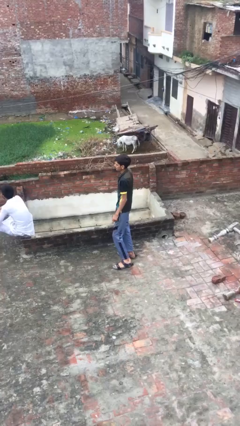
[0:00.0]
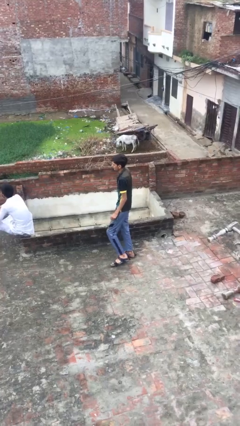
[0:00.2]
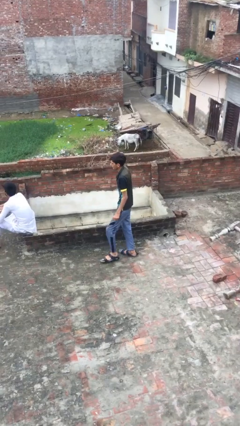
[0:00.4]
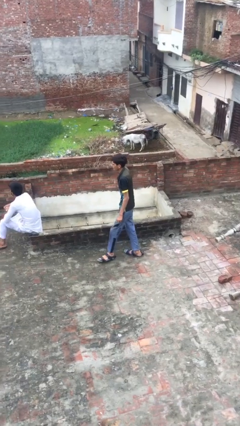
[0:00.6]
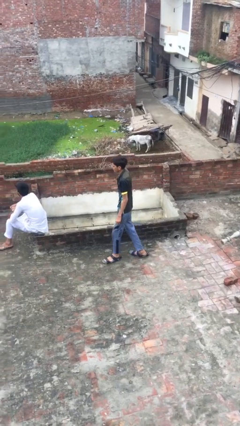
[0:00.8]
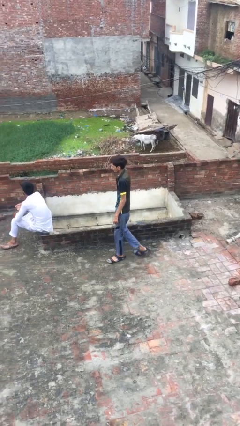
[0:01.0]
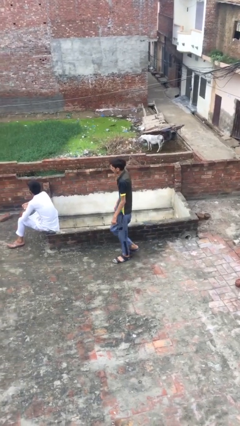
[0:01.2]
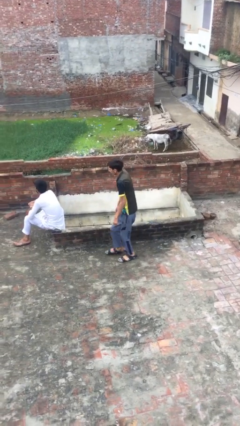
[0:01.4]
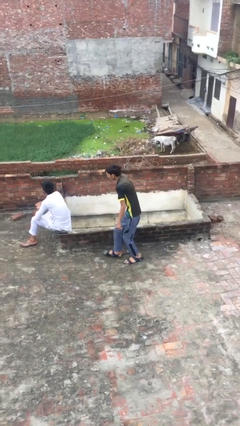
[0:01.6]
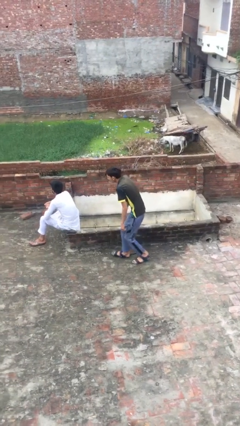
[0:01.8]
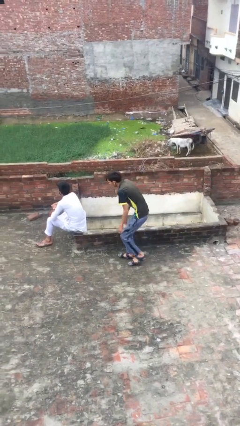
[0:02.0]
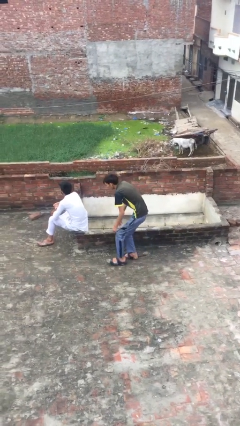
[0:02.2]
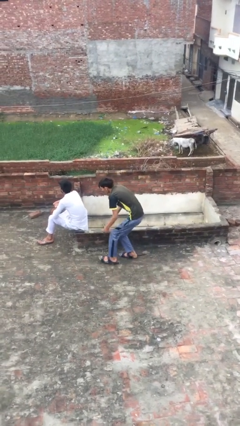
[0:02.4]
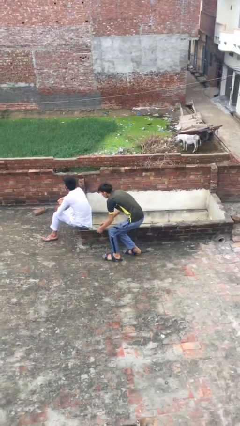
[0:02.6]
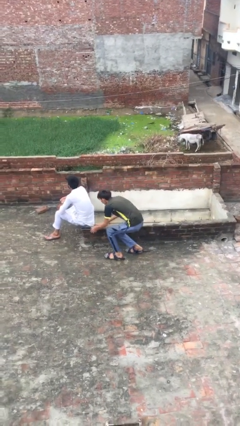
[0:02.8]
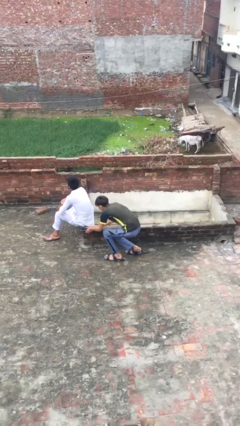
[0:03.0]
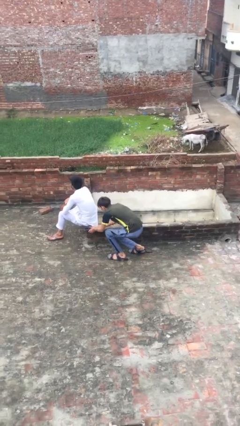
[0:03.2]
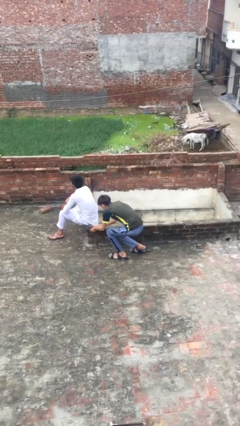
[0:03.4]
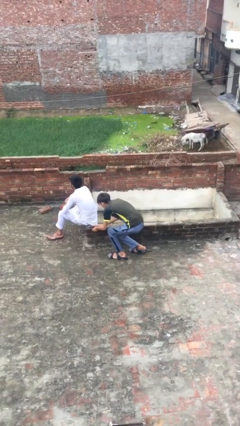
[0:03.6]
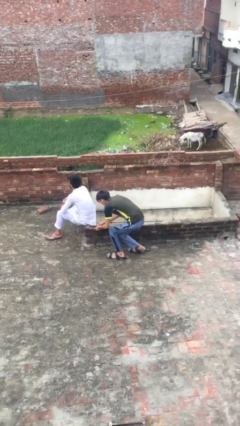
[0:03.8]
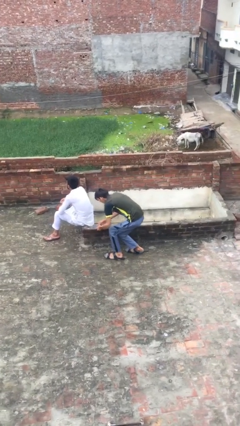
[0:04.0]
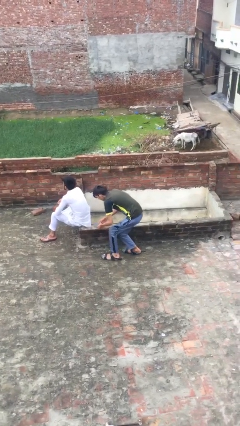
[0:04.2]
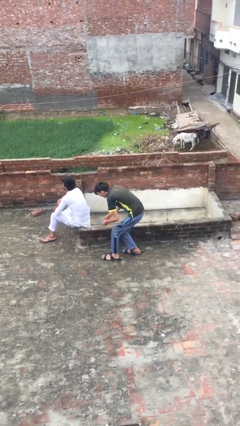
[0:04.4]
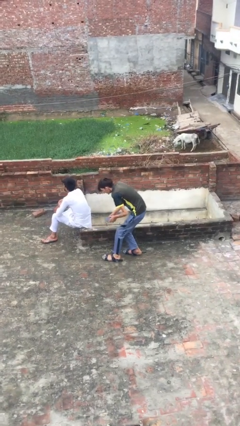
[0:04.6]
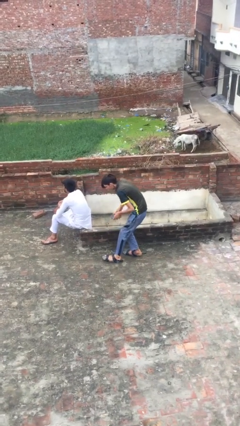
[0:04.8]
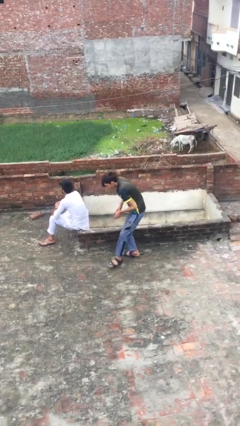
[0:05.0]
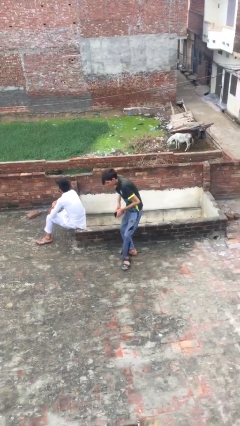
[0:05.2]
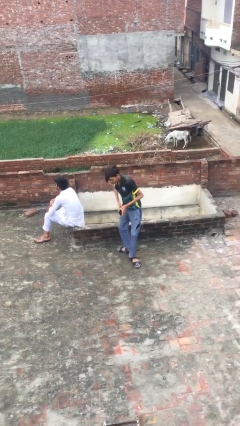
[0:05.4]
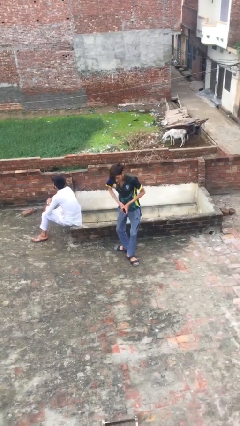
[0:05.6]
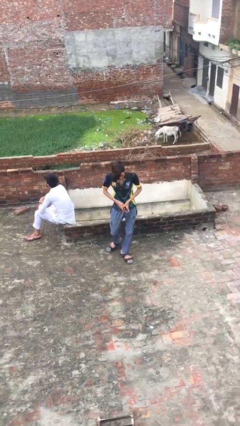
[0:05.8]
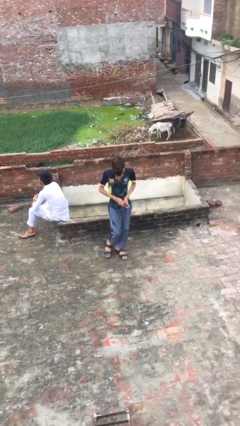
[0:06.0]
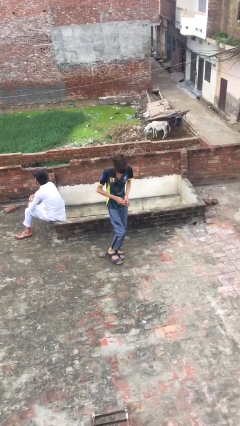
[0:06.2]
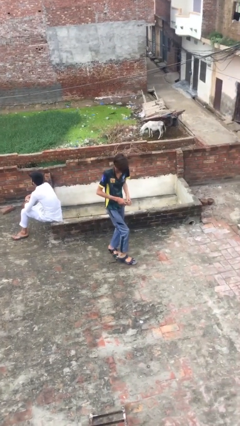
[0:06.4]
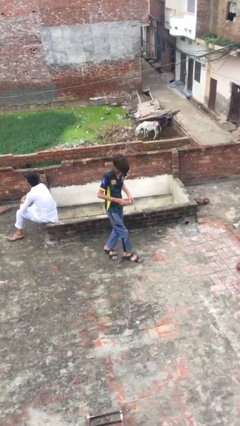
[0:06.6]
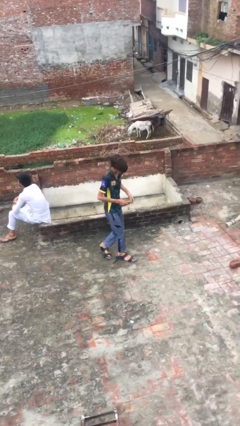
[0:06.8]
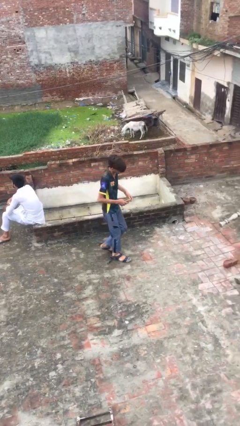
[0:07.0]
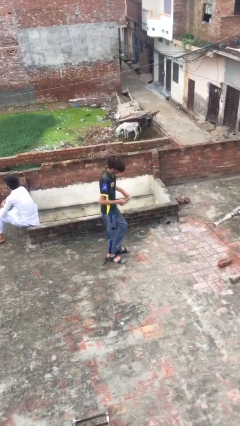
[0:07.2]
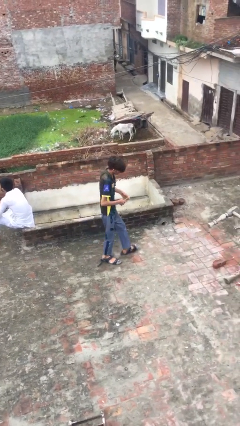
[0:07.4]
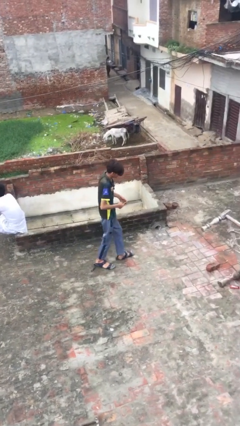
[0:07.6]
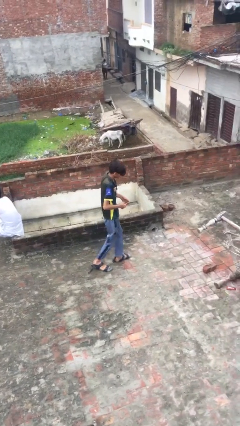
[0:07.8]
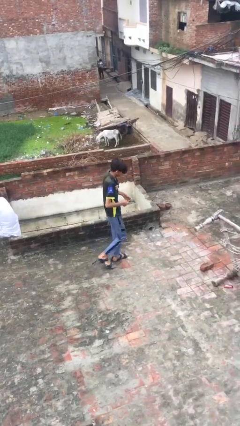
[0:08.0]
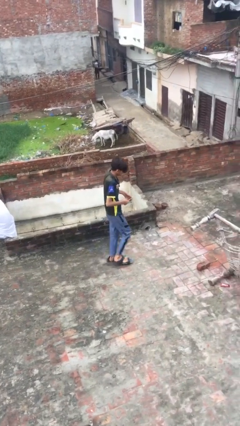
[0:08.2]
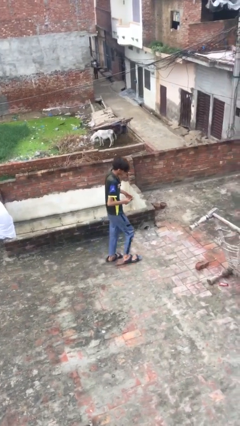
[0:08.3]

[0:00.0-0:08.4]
person steals object from person

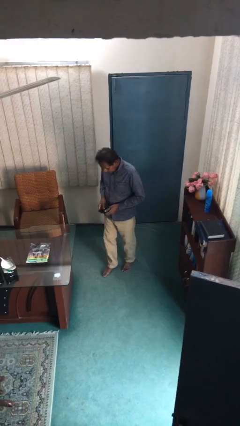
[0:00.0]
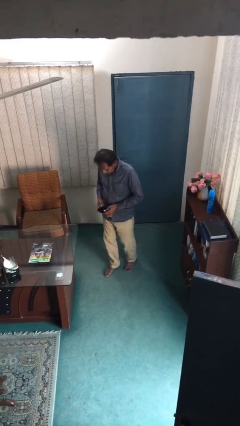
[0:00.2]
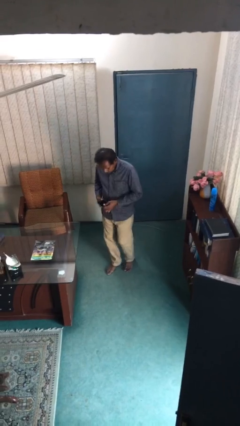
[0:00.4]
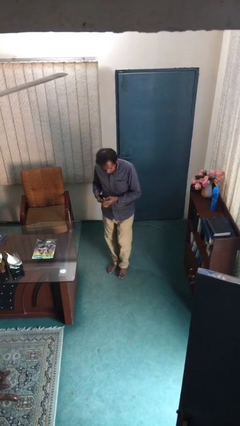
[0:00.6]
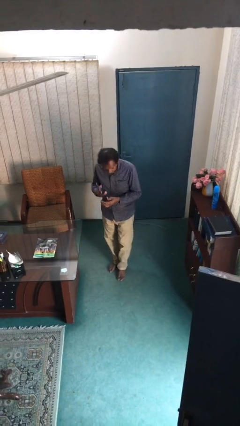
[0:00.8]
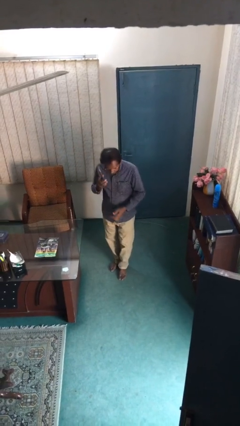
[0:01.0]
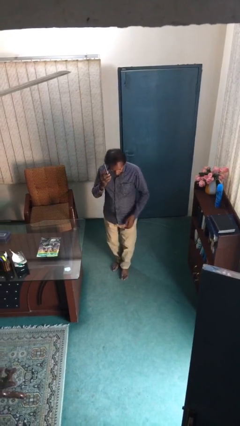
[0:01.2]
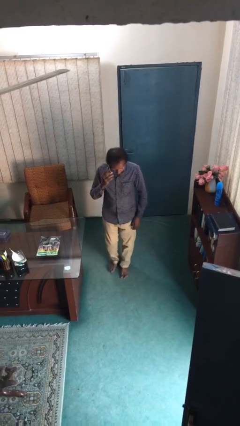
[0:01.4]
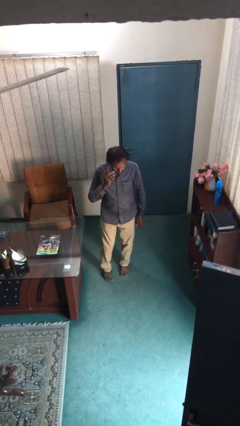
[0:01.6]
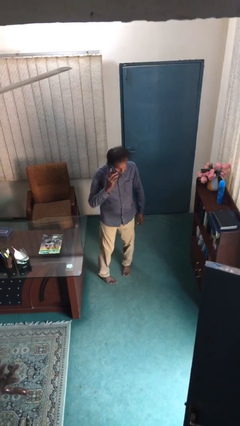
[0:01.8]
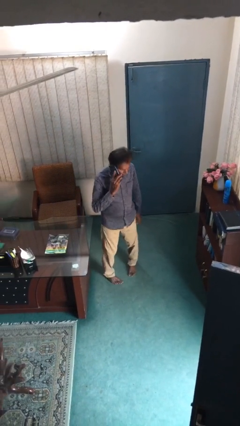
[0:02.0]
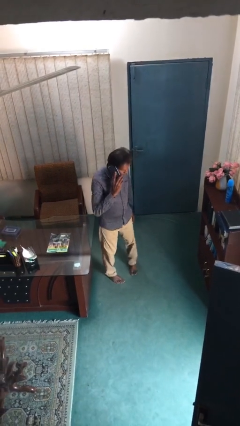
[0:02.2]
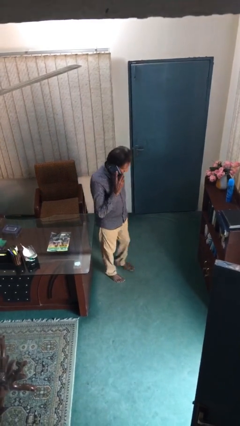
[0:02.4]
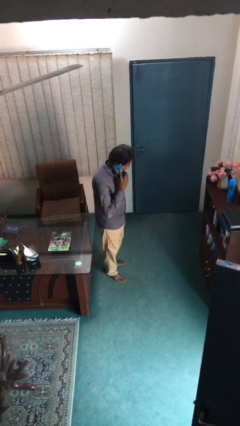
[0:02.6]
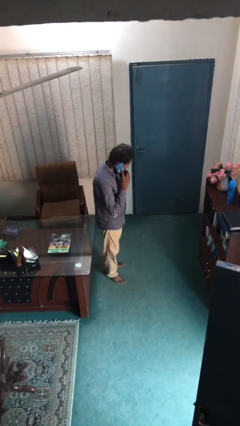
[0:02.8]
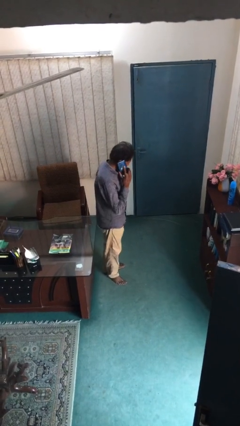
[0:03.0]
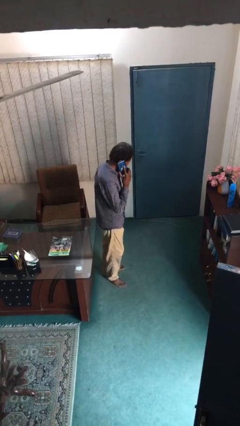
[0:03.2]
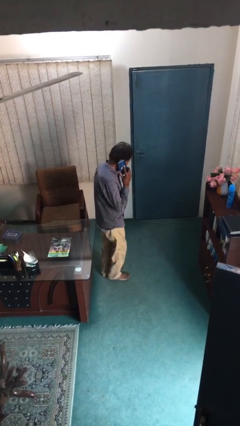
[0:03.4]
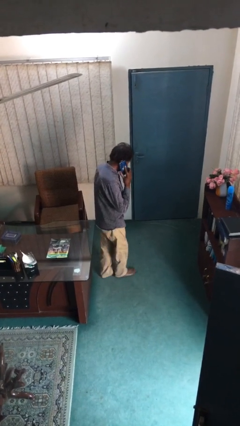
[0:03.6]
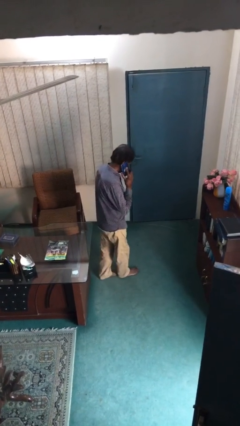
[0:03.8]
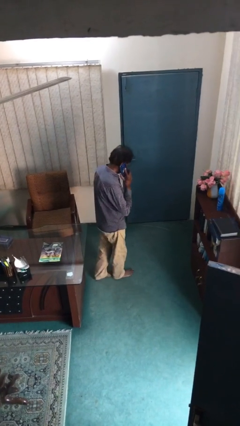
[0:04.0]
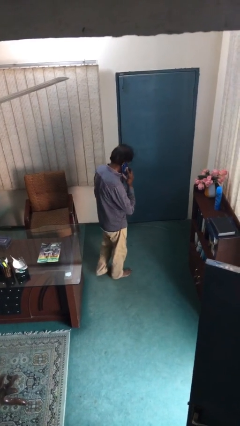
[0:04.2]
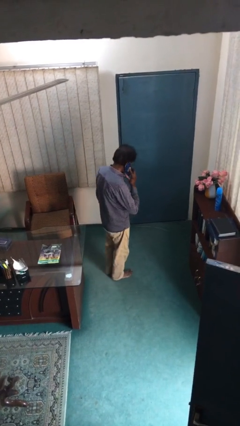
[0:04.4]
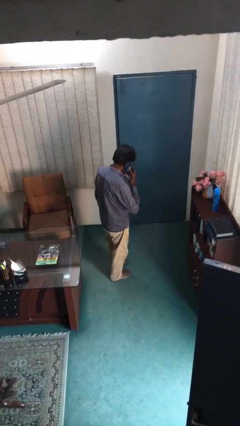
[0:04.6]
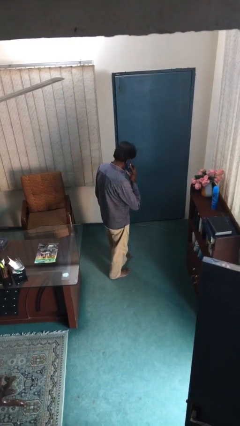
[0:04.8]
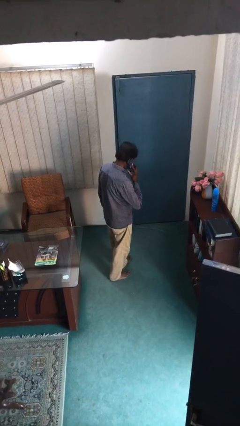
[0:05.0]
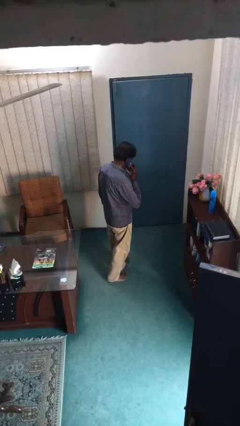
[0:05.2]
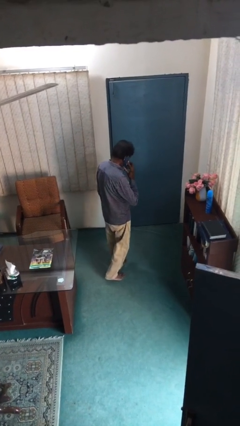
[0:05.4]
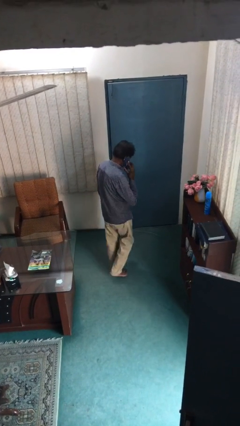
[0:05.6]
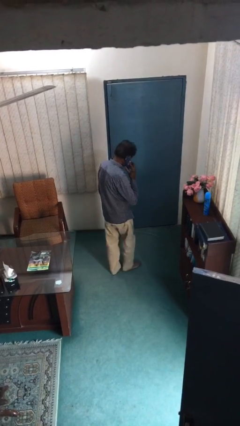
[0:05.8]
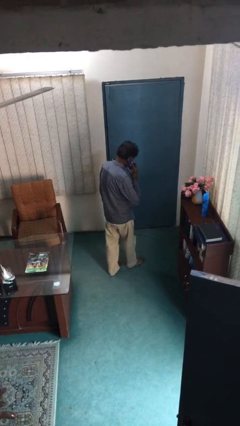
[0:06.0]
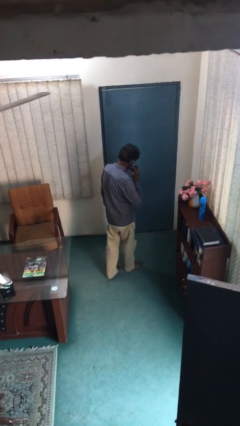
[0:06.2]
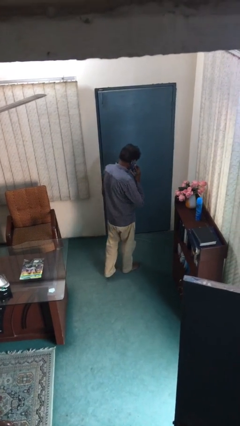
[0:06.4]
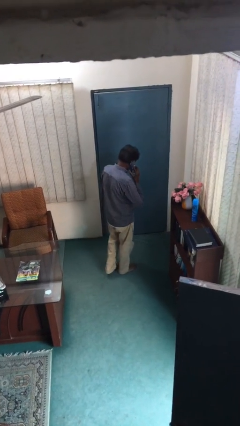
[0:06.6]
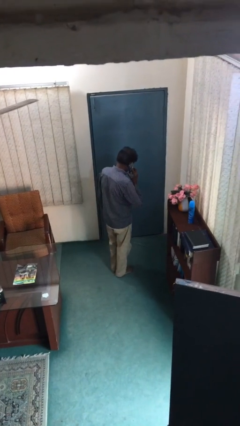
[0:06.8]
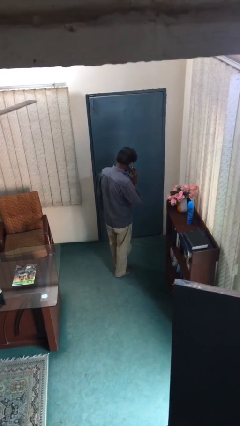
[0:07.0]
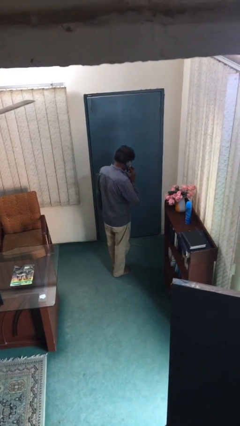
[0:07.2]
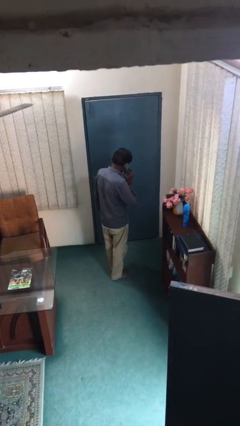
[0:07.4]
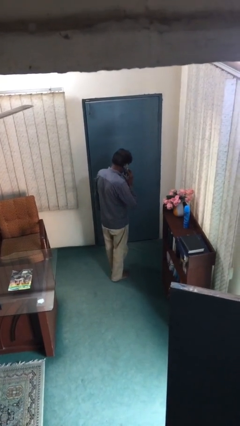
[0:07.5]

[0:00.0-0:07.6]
person talks on phone

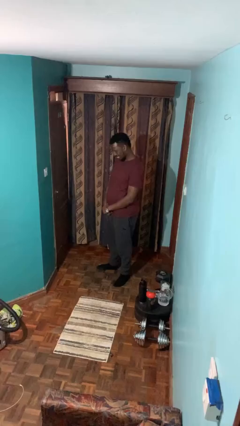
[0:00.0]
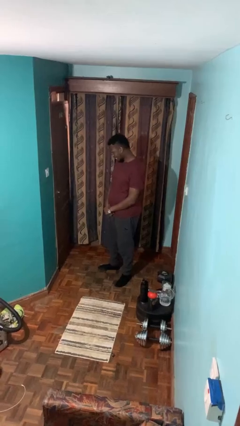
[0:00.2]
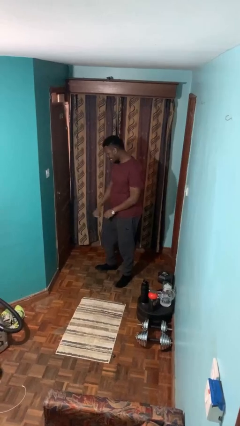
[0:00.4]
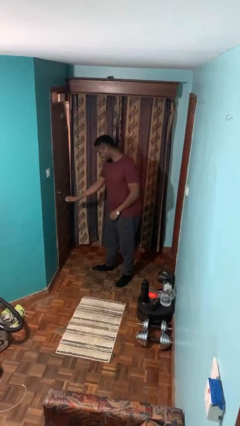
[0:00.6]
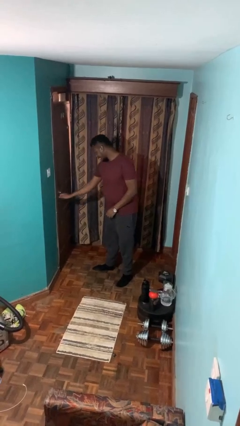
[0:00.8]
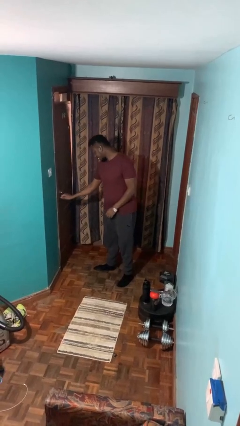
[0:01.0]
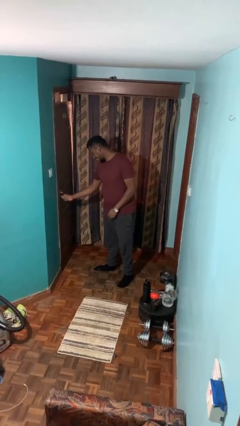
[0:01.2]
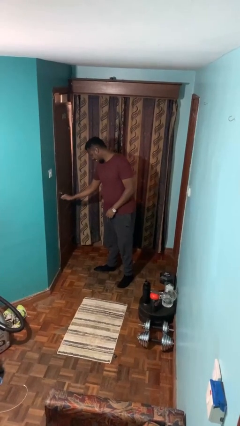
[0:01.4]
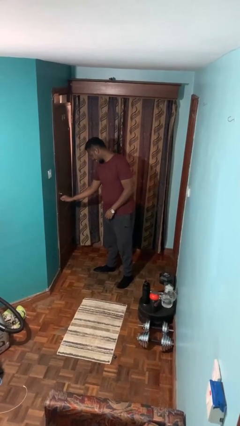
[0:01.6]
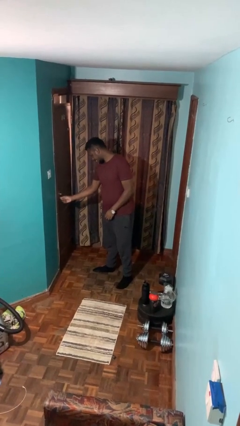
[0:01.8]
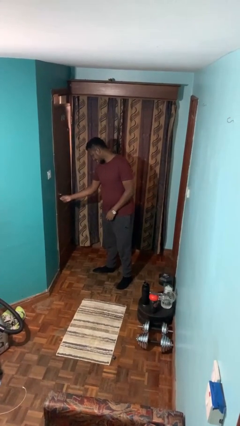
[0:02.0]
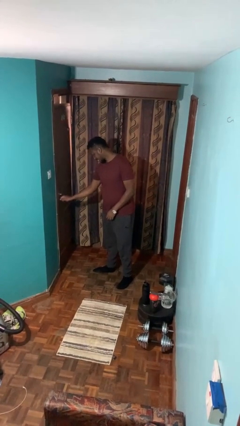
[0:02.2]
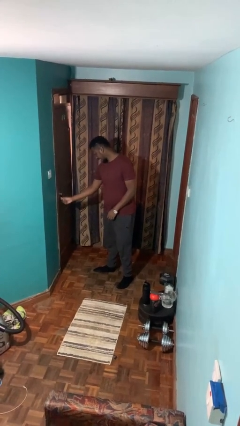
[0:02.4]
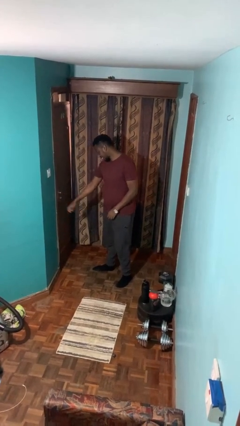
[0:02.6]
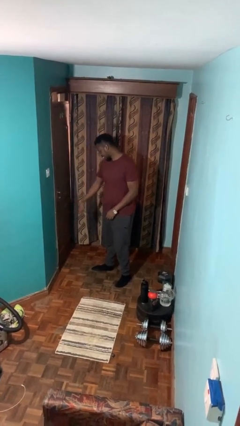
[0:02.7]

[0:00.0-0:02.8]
person unlocks door with keys
